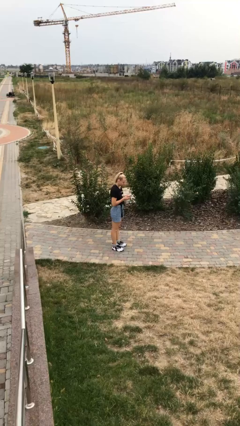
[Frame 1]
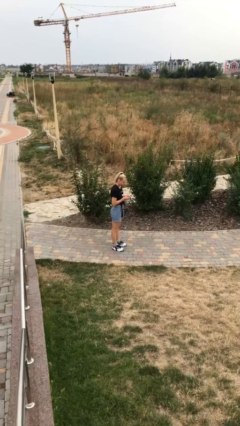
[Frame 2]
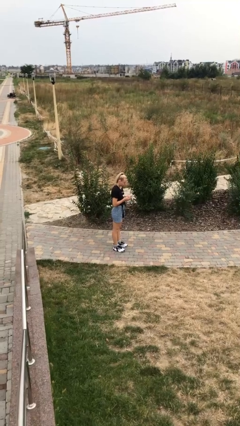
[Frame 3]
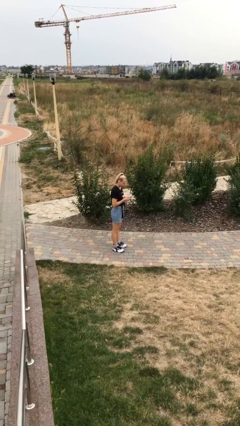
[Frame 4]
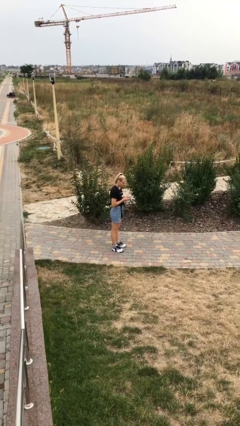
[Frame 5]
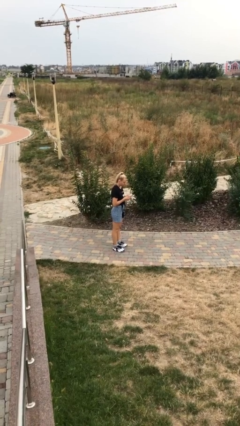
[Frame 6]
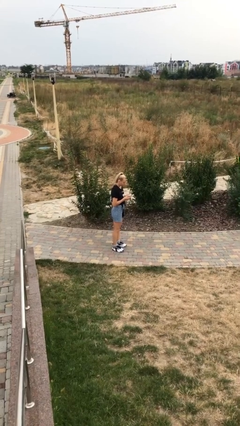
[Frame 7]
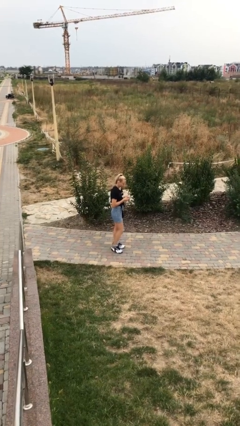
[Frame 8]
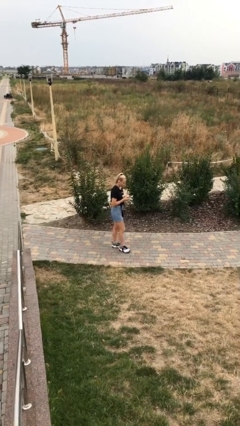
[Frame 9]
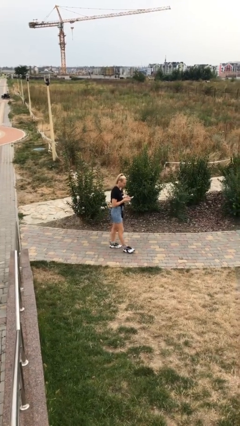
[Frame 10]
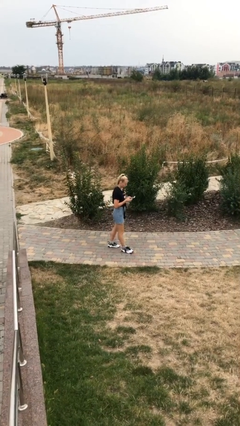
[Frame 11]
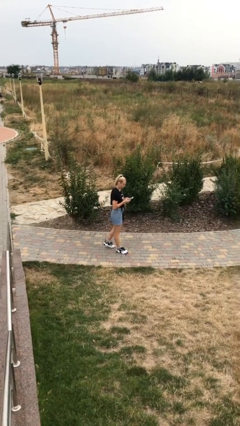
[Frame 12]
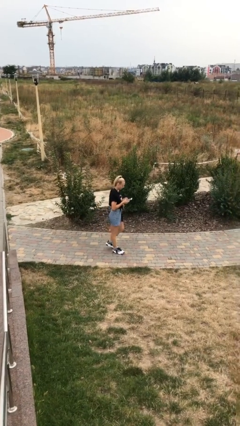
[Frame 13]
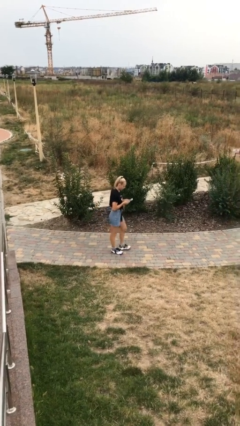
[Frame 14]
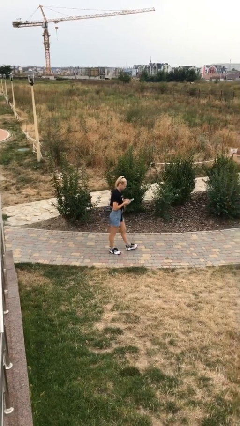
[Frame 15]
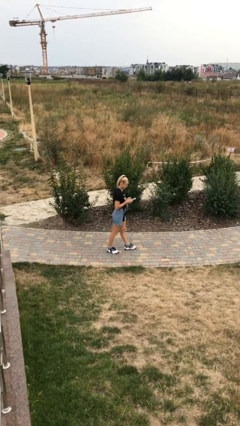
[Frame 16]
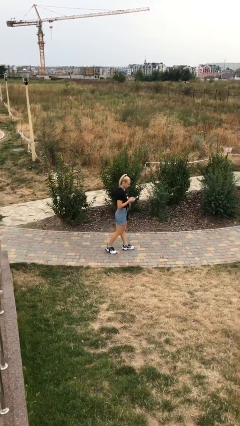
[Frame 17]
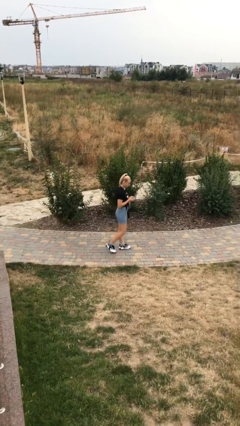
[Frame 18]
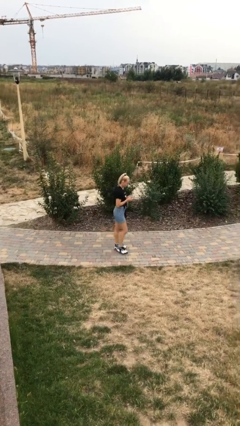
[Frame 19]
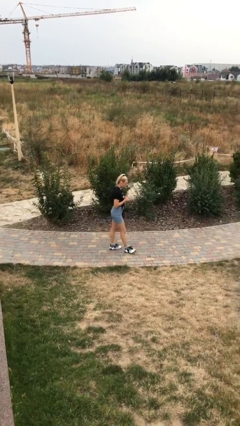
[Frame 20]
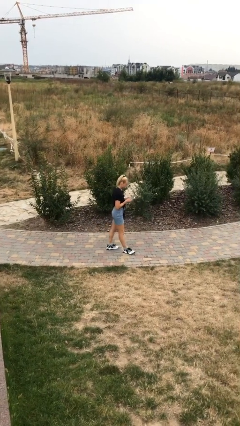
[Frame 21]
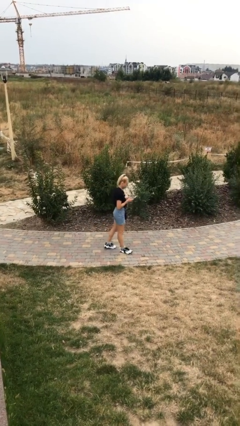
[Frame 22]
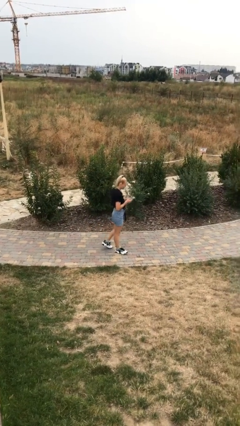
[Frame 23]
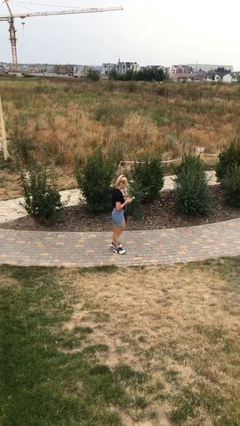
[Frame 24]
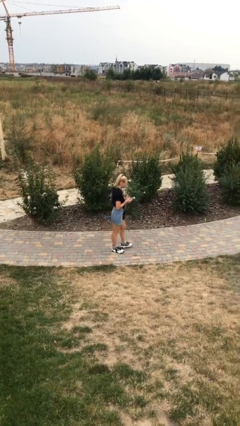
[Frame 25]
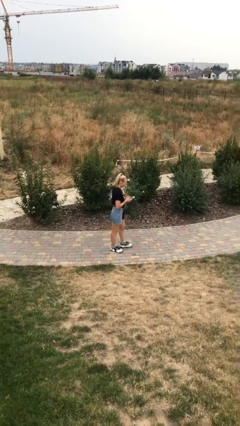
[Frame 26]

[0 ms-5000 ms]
person texts on phone

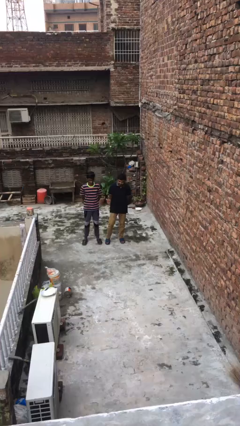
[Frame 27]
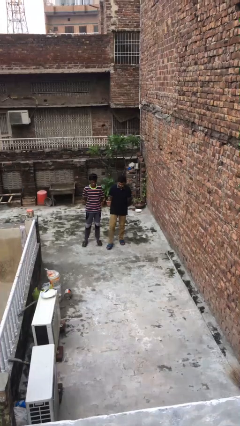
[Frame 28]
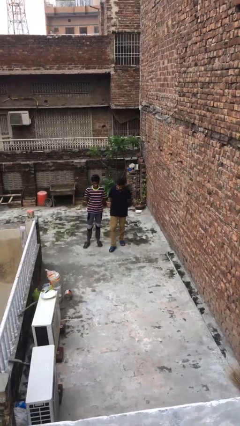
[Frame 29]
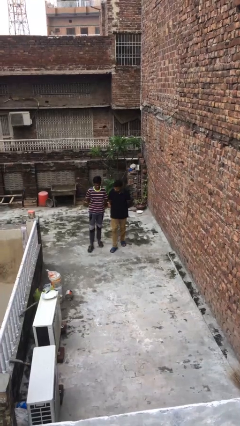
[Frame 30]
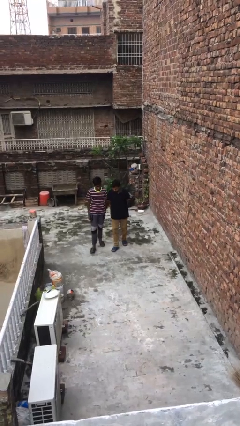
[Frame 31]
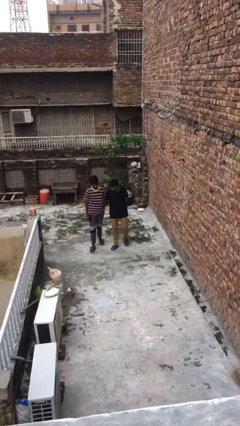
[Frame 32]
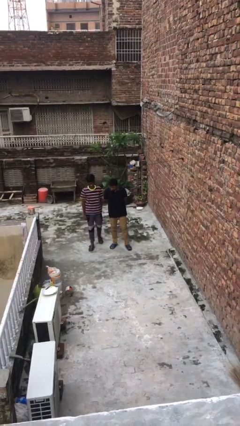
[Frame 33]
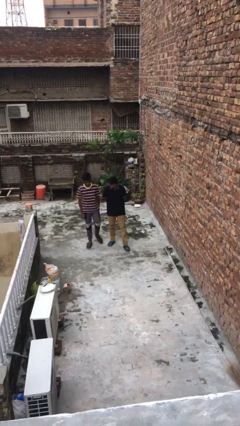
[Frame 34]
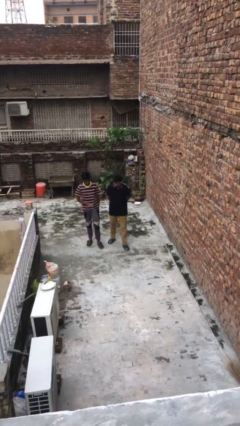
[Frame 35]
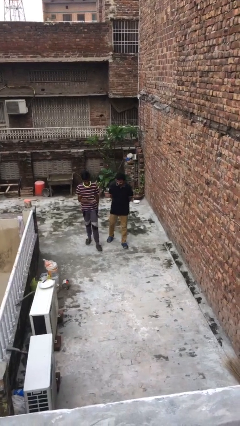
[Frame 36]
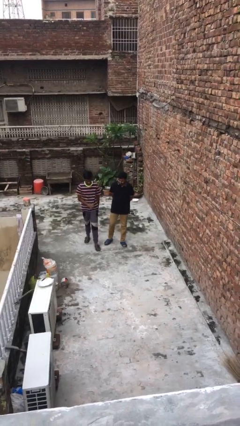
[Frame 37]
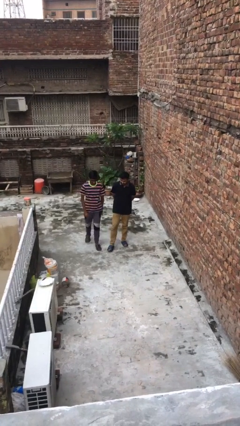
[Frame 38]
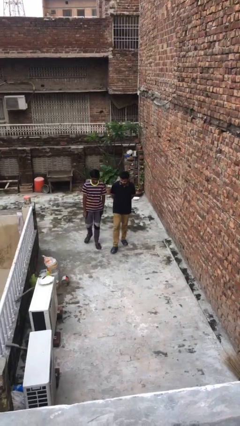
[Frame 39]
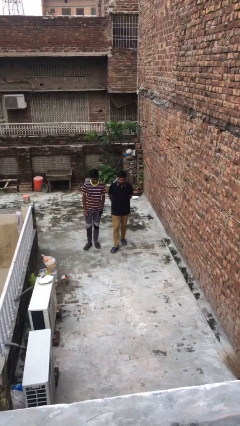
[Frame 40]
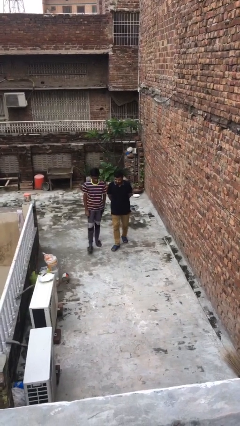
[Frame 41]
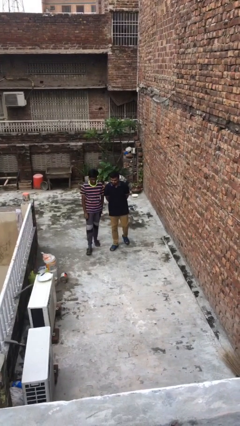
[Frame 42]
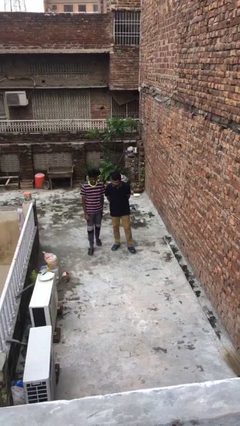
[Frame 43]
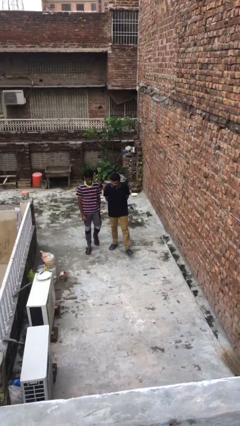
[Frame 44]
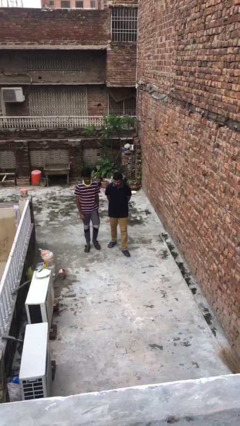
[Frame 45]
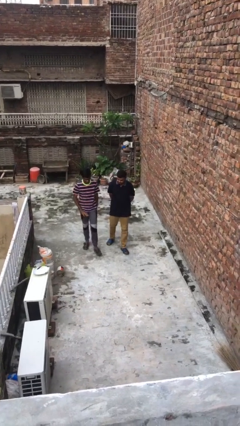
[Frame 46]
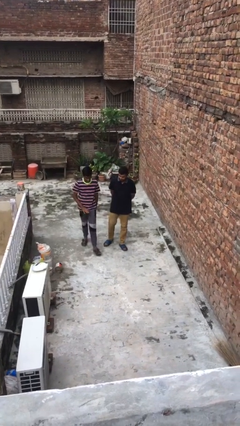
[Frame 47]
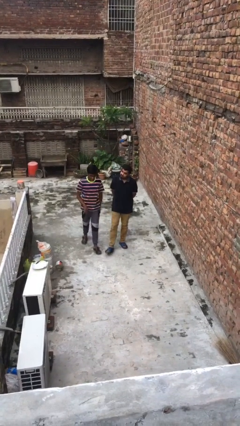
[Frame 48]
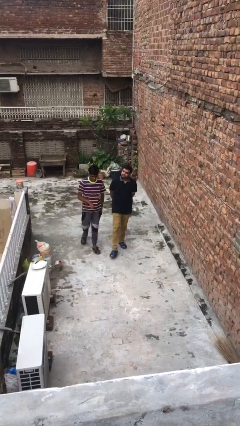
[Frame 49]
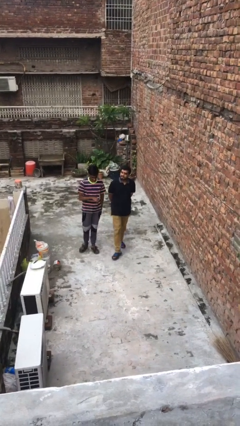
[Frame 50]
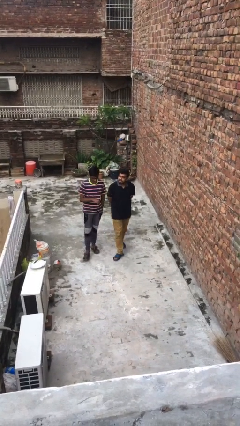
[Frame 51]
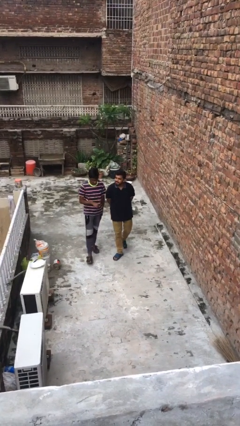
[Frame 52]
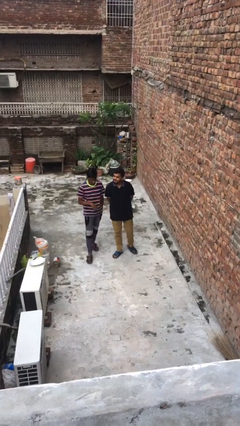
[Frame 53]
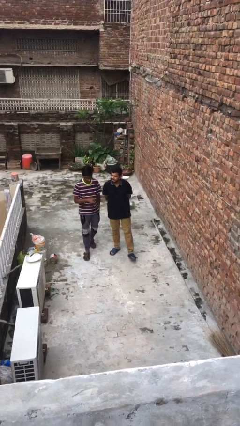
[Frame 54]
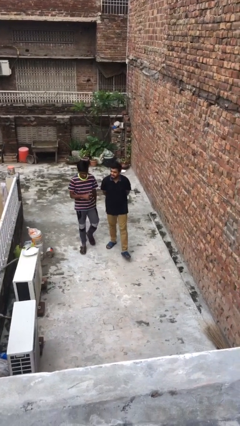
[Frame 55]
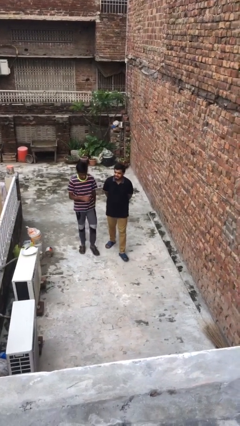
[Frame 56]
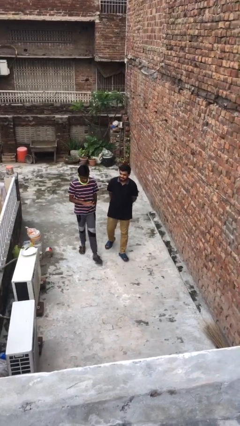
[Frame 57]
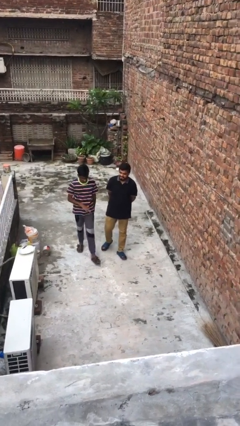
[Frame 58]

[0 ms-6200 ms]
person talks to person

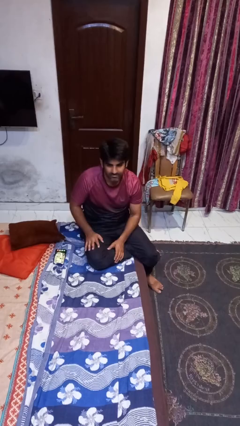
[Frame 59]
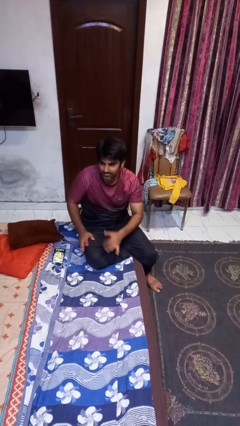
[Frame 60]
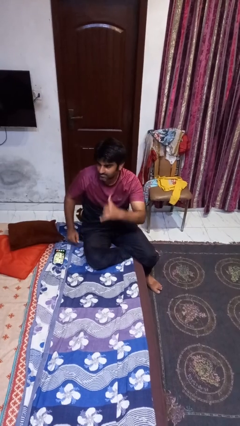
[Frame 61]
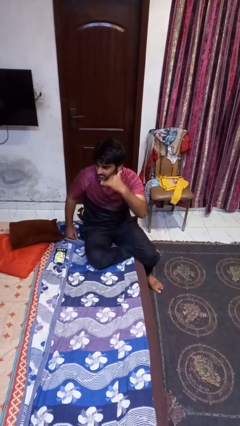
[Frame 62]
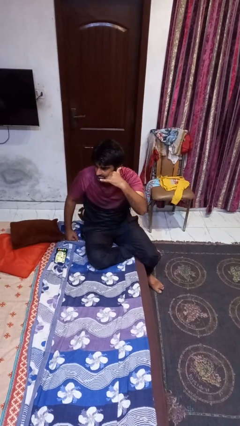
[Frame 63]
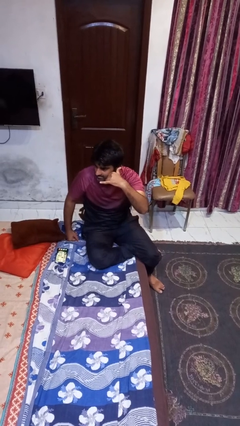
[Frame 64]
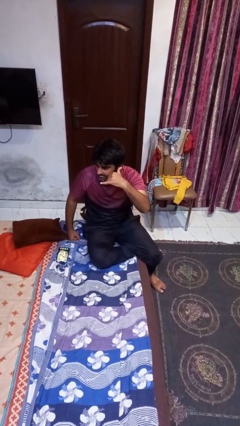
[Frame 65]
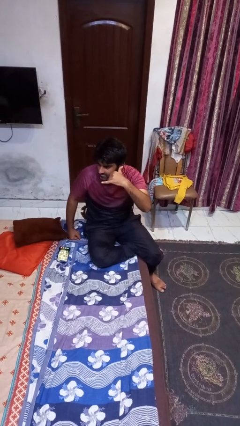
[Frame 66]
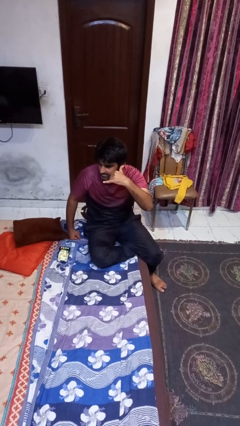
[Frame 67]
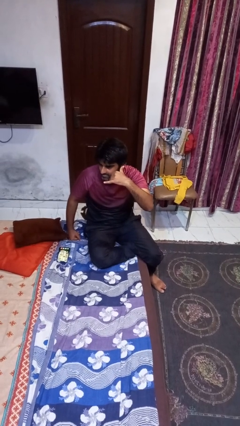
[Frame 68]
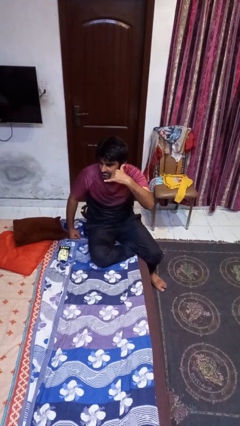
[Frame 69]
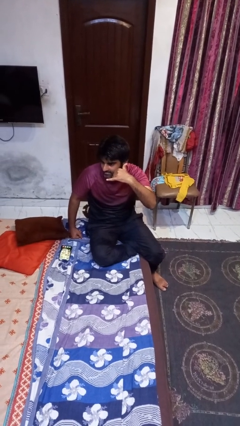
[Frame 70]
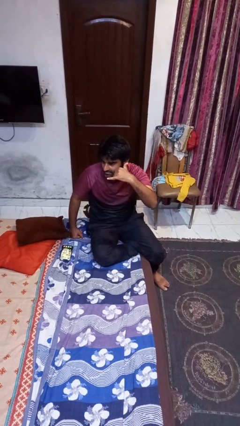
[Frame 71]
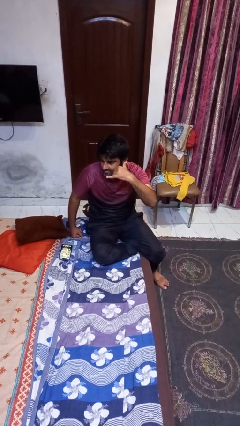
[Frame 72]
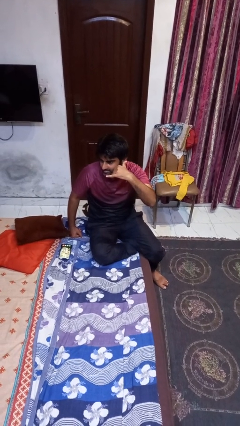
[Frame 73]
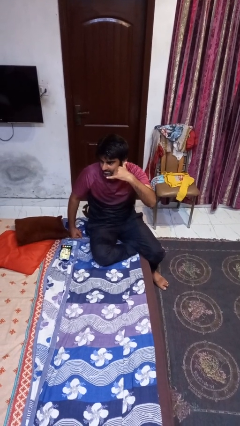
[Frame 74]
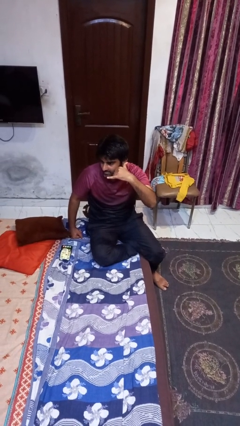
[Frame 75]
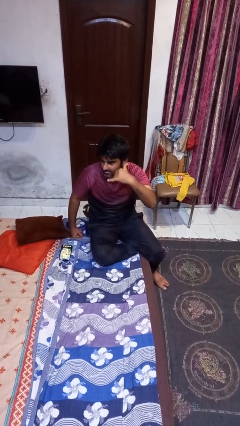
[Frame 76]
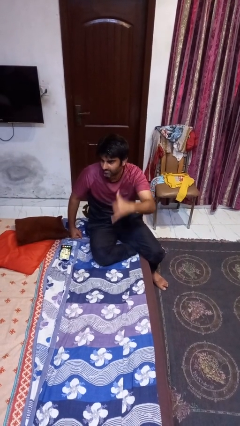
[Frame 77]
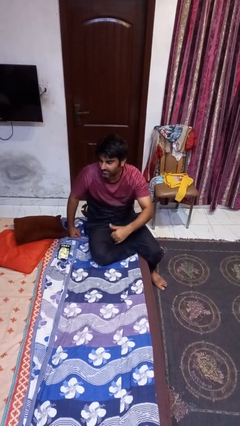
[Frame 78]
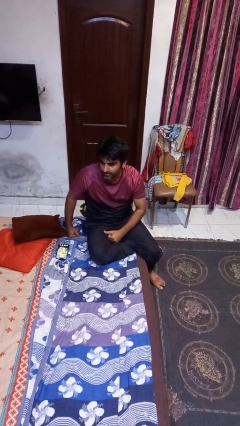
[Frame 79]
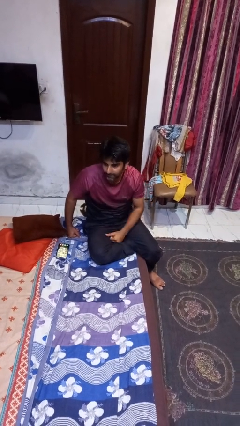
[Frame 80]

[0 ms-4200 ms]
person gestures call me

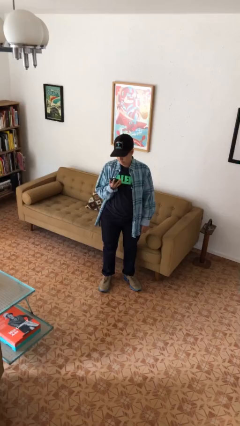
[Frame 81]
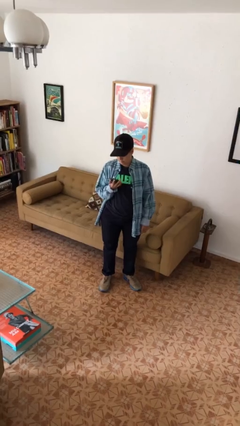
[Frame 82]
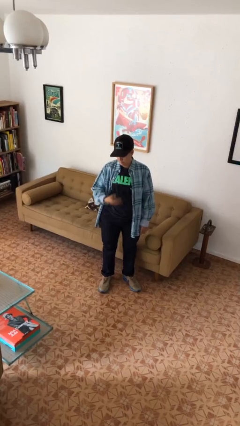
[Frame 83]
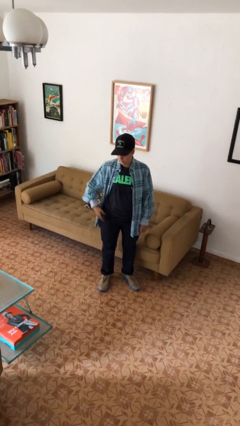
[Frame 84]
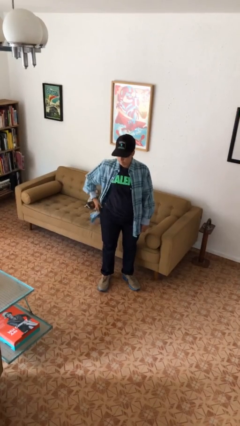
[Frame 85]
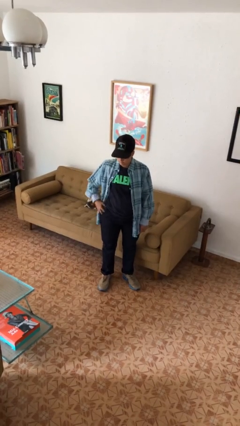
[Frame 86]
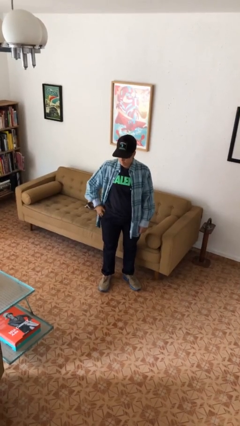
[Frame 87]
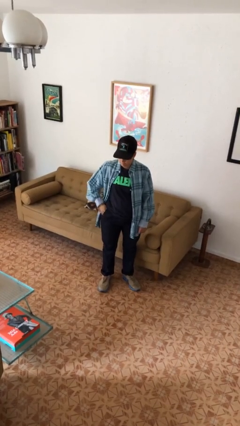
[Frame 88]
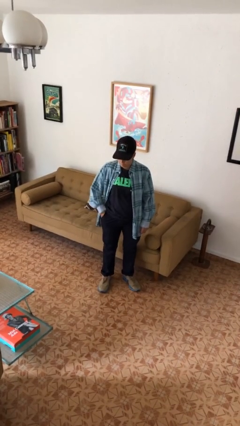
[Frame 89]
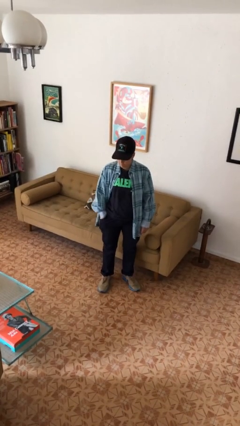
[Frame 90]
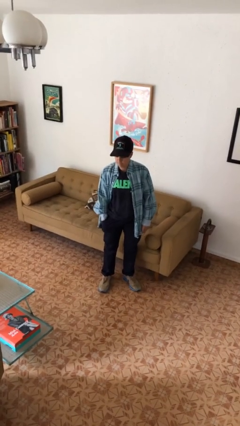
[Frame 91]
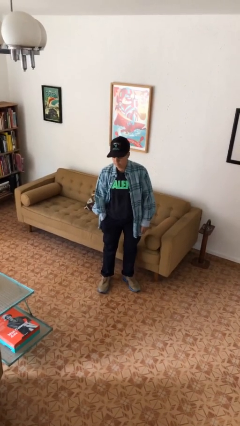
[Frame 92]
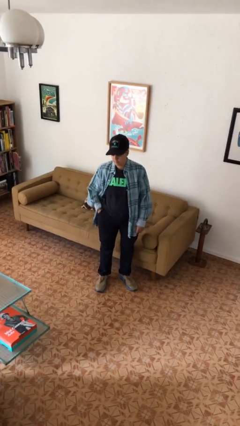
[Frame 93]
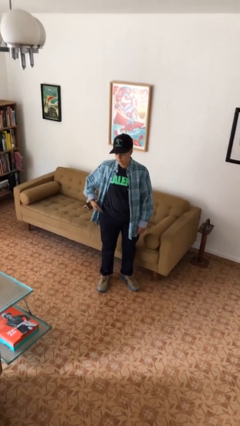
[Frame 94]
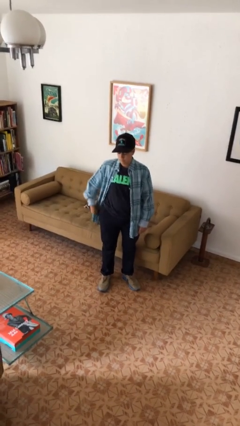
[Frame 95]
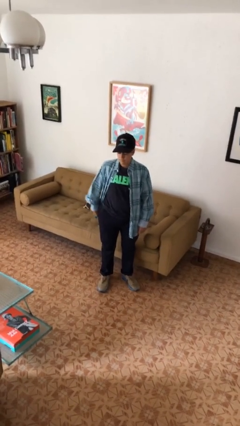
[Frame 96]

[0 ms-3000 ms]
person puts phone into pocket
